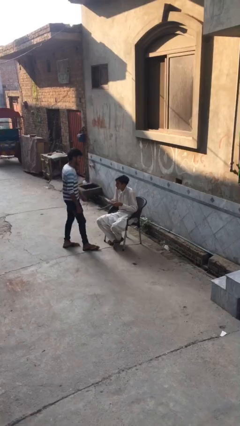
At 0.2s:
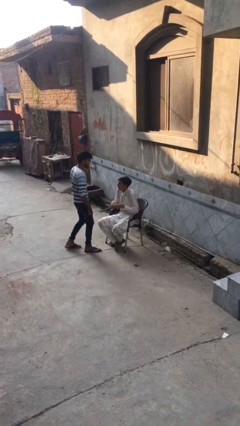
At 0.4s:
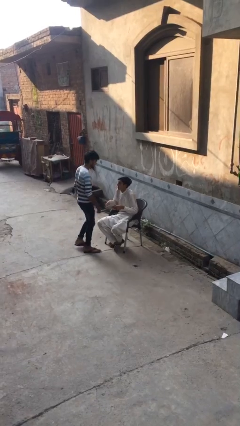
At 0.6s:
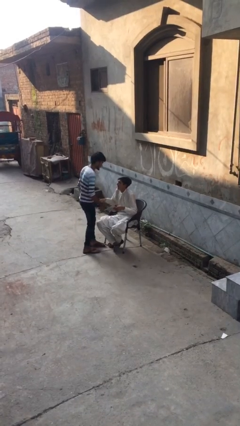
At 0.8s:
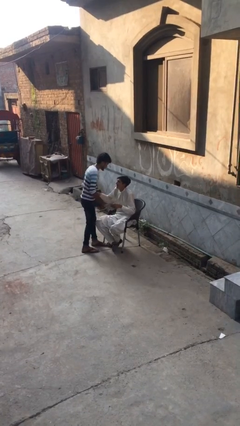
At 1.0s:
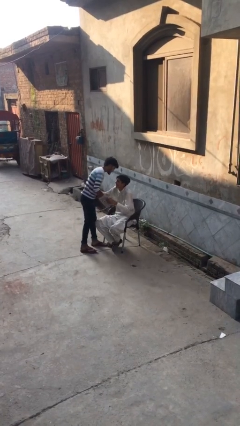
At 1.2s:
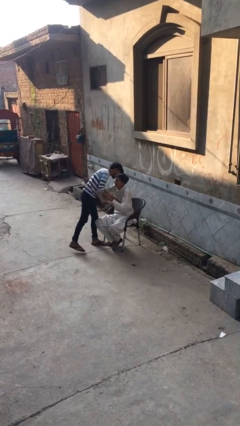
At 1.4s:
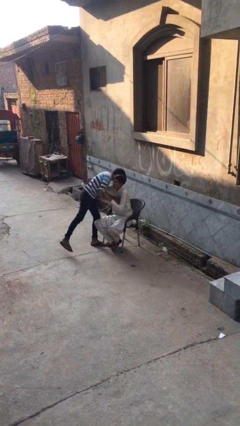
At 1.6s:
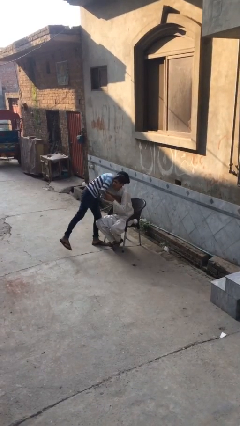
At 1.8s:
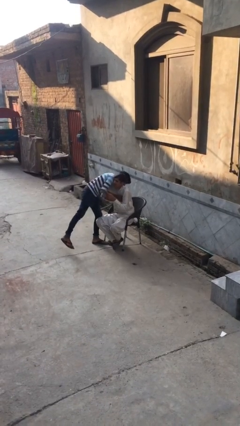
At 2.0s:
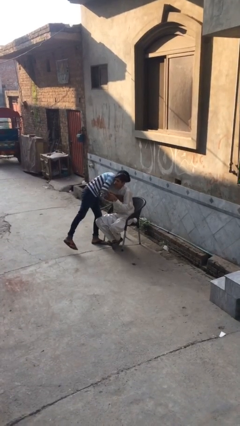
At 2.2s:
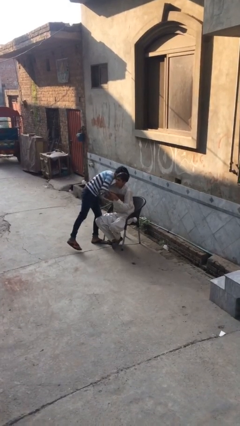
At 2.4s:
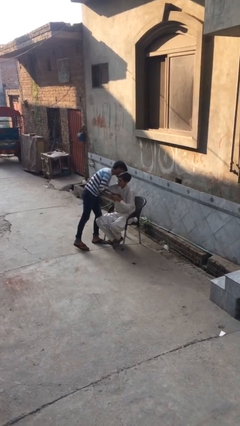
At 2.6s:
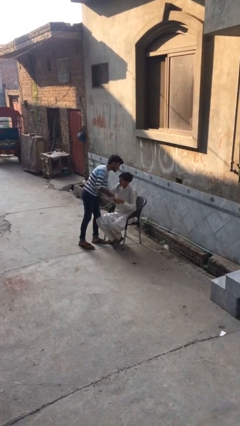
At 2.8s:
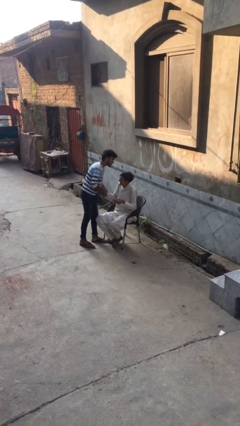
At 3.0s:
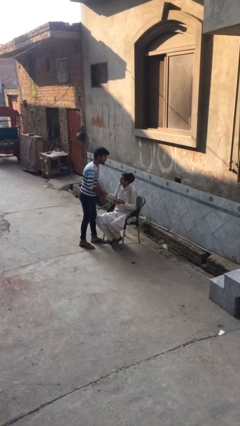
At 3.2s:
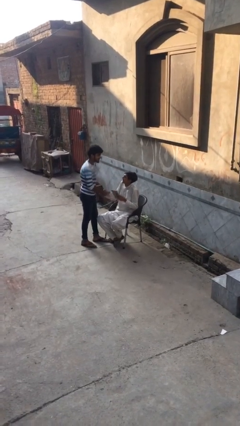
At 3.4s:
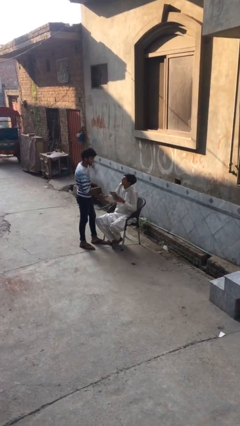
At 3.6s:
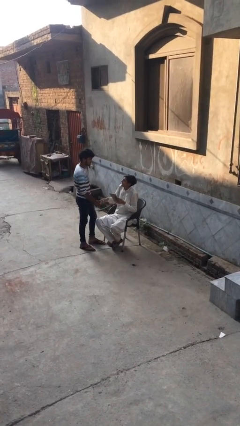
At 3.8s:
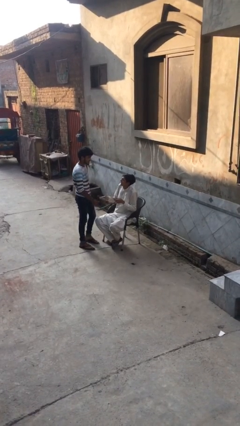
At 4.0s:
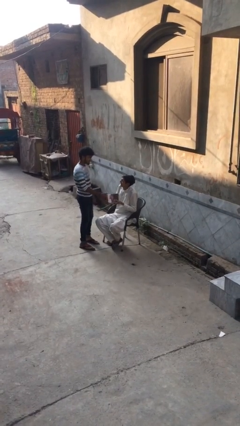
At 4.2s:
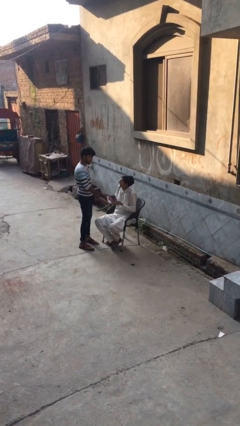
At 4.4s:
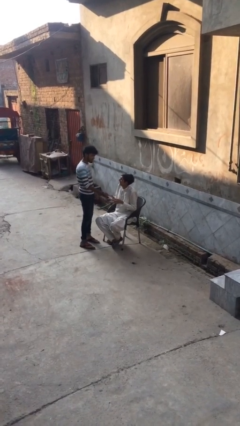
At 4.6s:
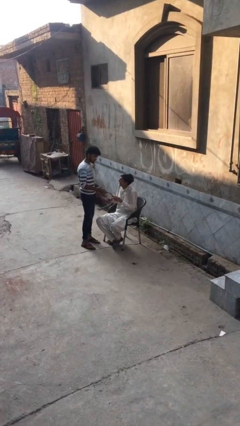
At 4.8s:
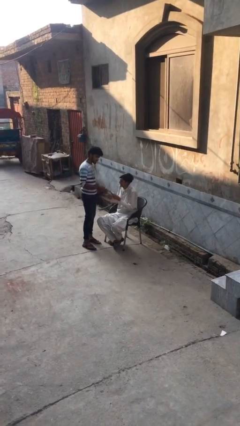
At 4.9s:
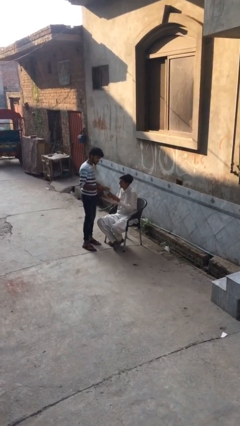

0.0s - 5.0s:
person embraces person

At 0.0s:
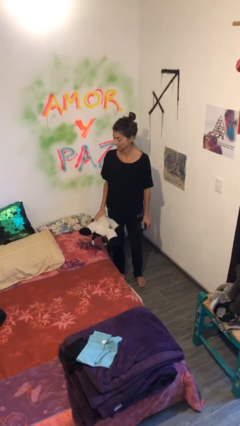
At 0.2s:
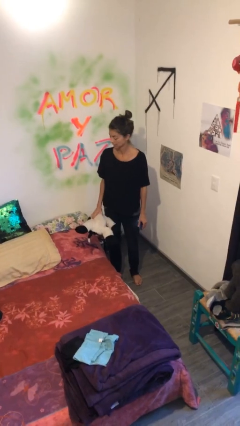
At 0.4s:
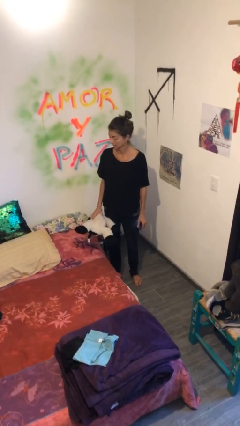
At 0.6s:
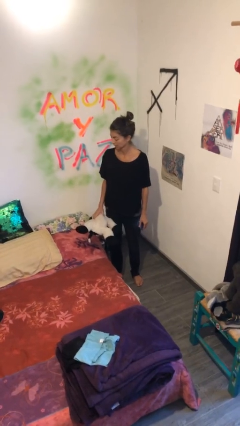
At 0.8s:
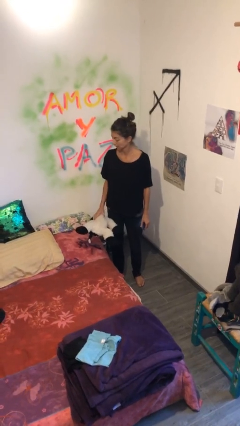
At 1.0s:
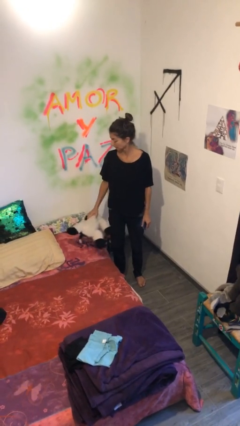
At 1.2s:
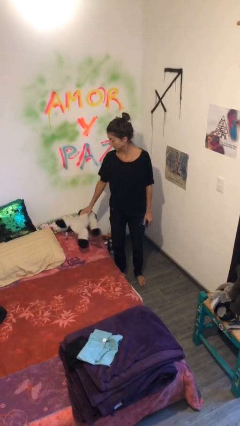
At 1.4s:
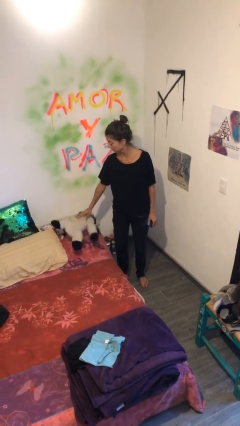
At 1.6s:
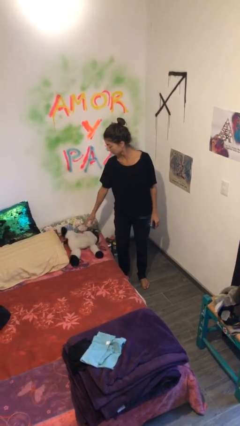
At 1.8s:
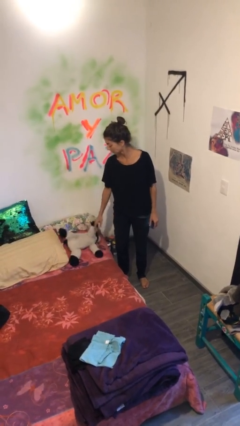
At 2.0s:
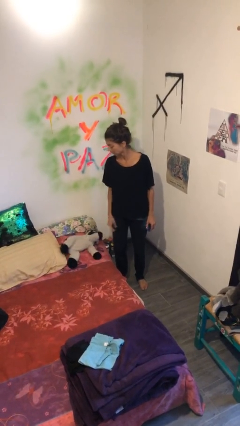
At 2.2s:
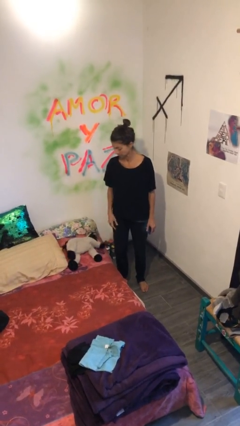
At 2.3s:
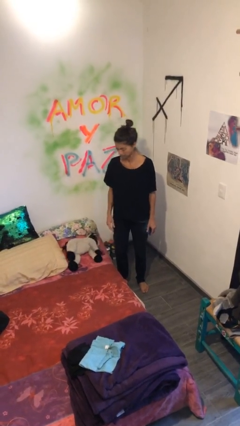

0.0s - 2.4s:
person puts down object on bed

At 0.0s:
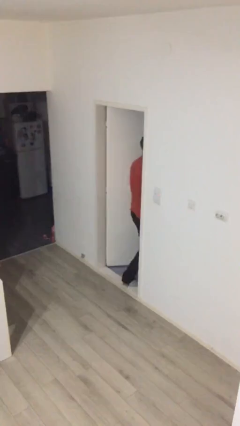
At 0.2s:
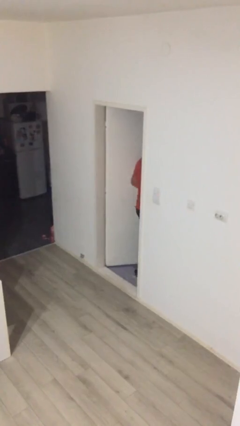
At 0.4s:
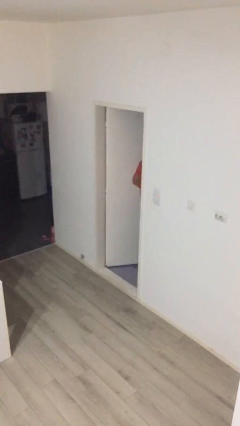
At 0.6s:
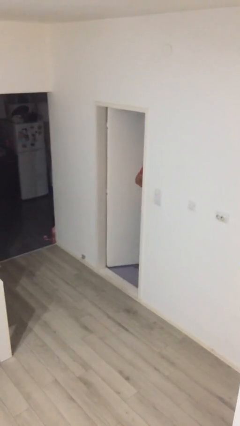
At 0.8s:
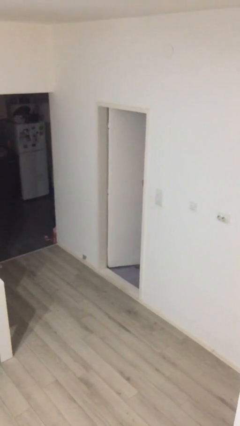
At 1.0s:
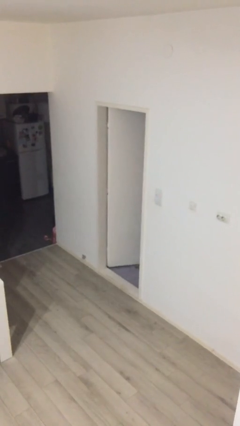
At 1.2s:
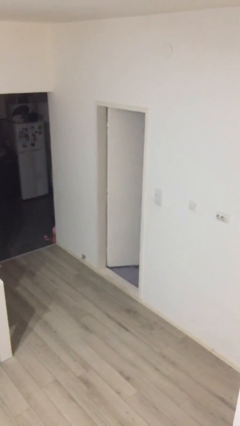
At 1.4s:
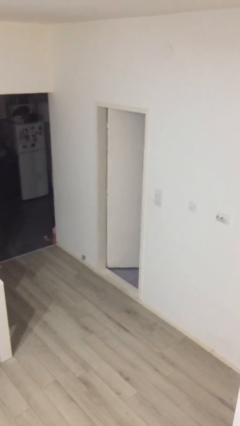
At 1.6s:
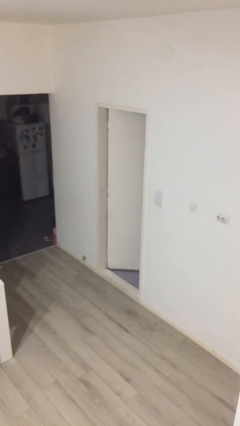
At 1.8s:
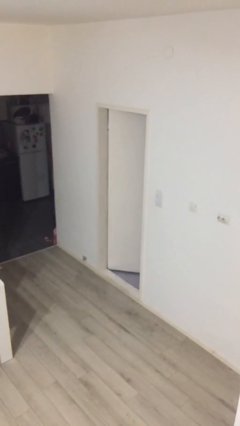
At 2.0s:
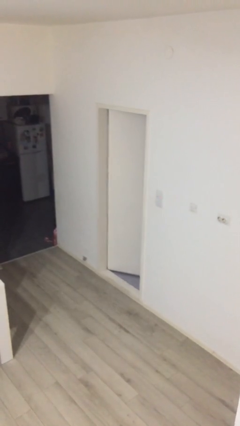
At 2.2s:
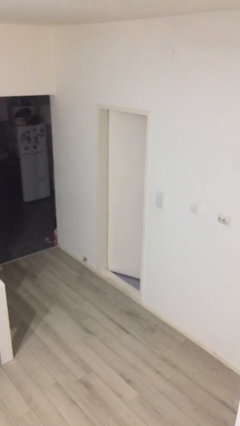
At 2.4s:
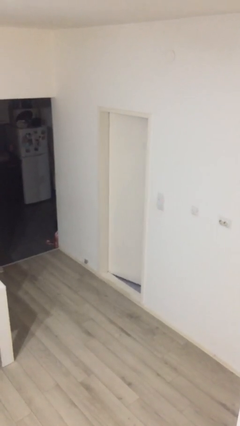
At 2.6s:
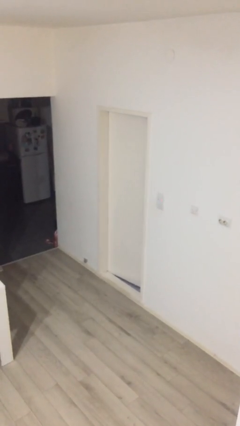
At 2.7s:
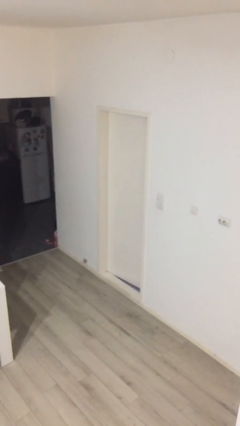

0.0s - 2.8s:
person exits scene through structure

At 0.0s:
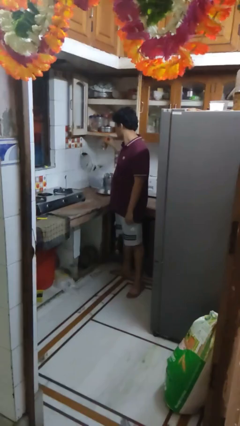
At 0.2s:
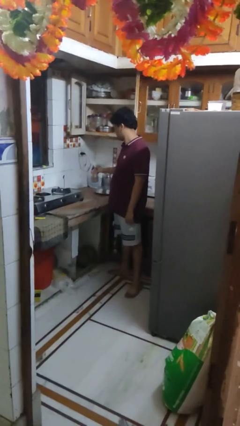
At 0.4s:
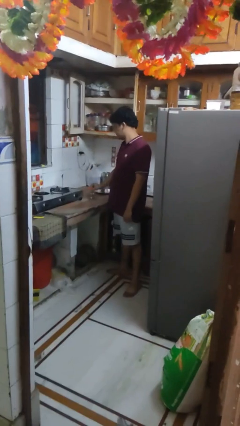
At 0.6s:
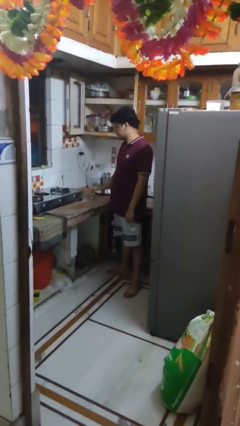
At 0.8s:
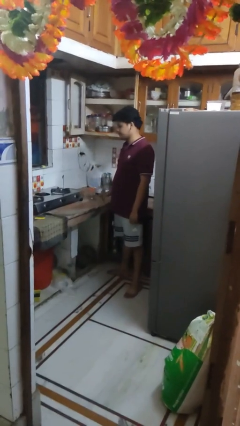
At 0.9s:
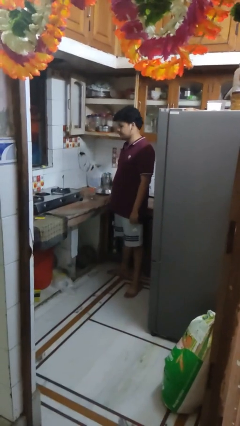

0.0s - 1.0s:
person takes object from cabinet

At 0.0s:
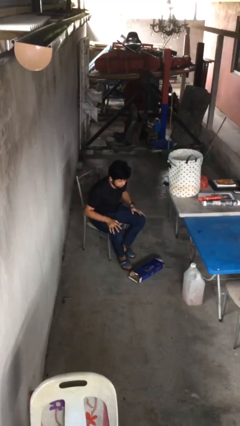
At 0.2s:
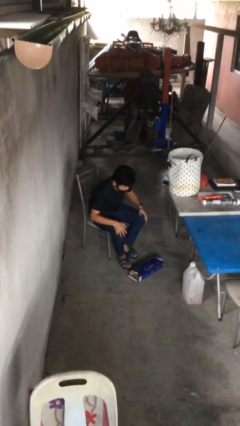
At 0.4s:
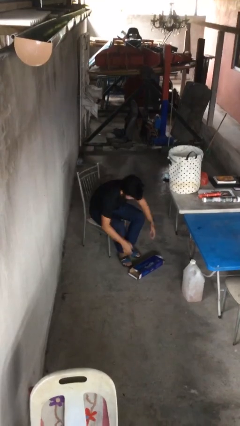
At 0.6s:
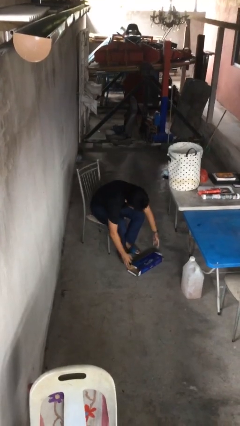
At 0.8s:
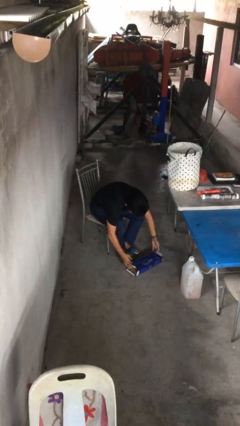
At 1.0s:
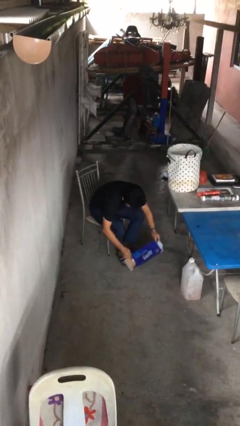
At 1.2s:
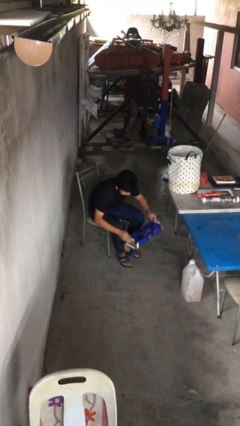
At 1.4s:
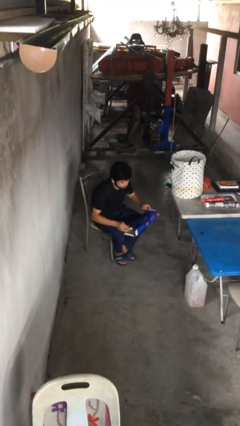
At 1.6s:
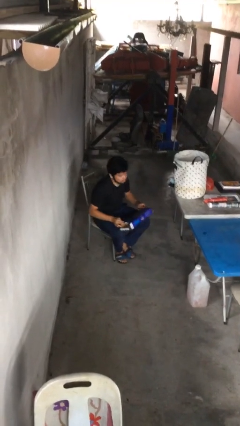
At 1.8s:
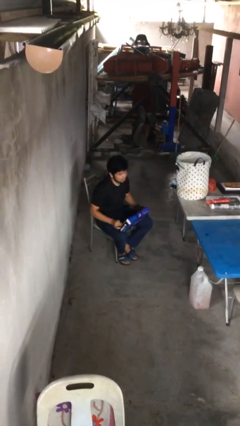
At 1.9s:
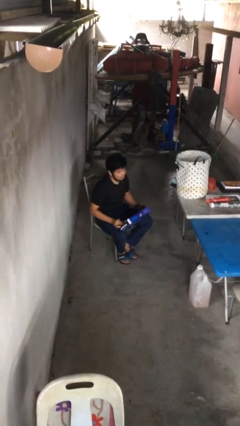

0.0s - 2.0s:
person picks up object from floor

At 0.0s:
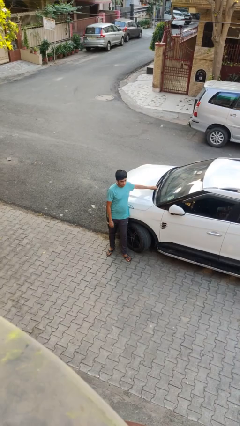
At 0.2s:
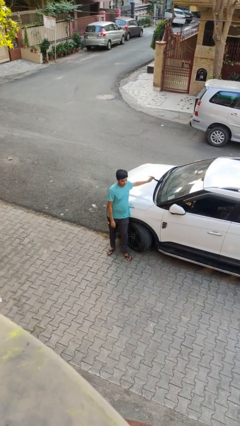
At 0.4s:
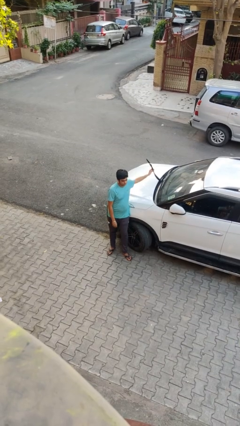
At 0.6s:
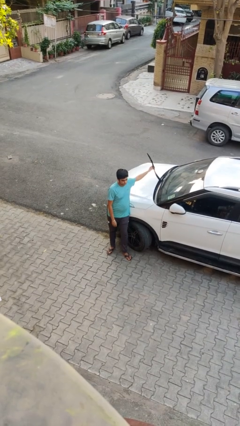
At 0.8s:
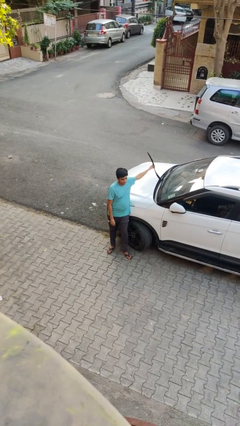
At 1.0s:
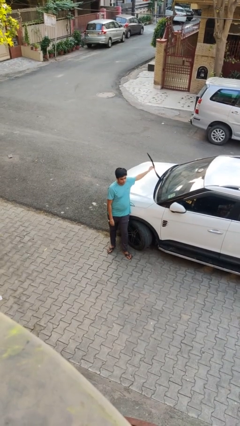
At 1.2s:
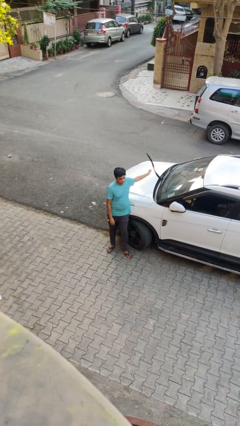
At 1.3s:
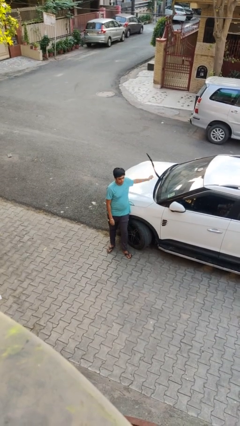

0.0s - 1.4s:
person flips up car wipers

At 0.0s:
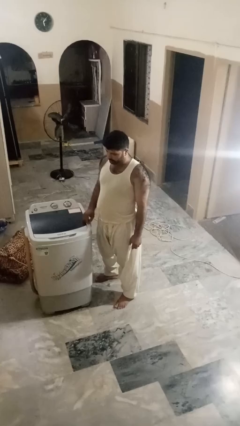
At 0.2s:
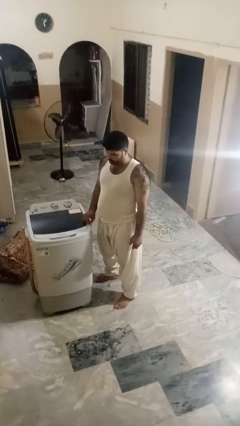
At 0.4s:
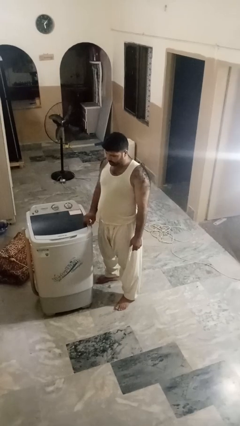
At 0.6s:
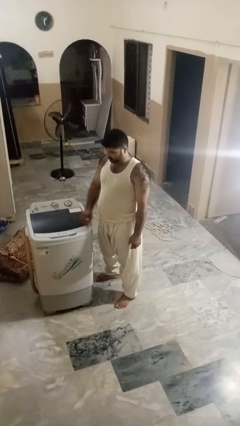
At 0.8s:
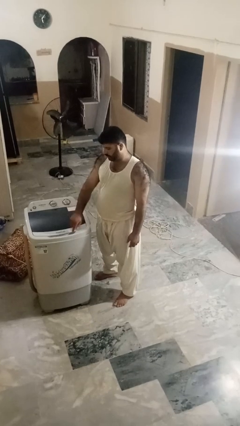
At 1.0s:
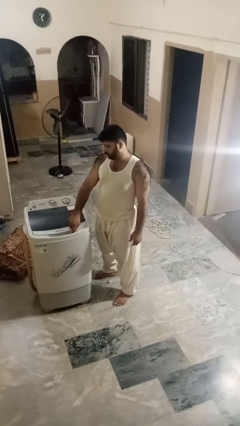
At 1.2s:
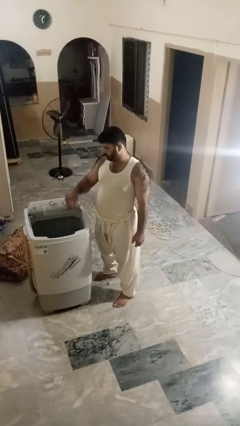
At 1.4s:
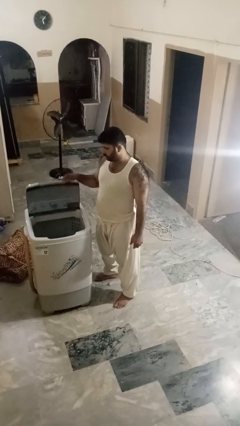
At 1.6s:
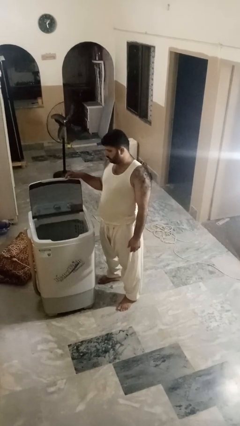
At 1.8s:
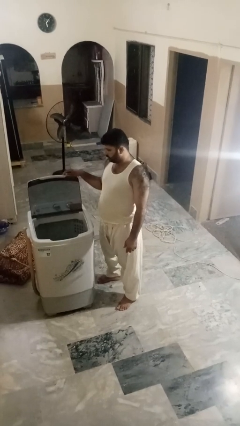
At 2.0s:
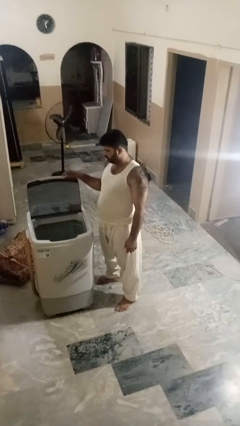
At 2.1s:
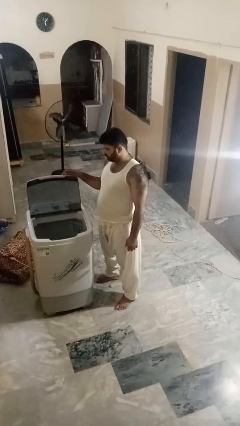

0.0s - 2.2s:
person opens clothes washer
